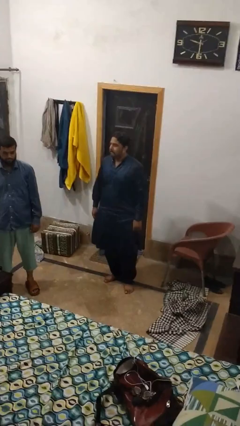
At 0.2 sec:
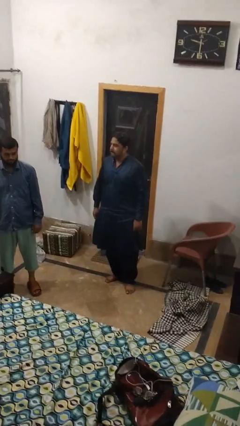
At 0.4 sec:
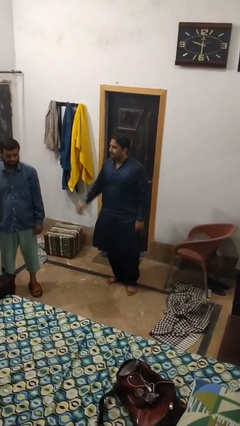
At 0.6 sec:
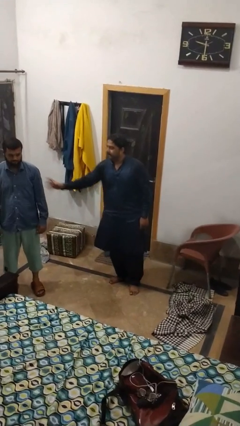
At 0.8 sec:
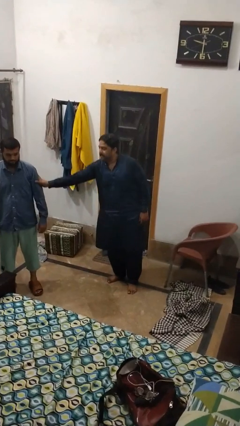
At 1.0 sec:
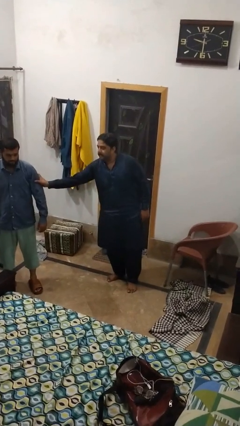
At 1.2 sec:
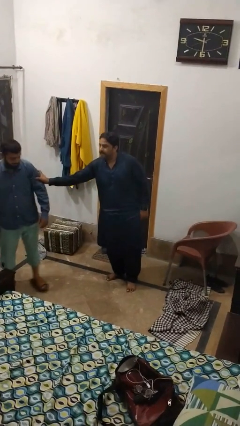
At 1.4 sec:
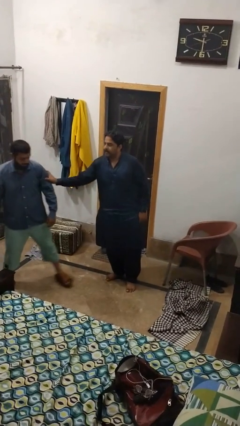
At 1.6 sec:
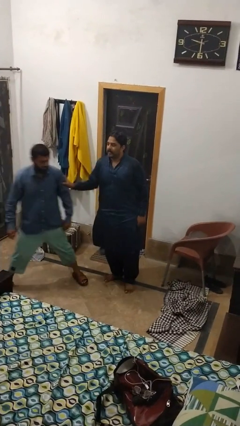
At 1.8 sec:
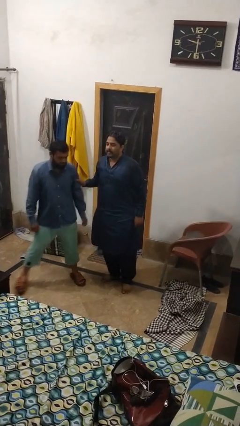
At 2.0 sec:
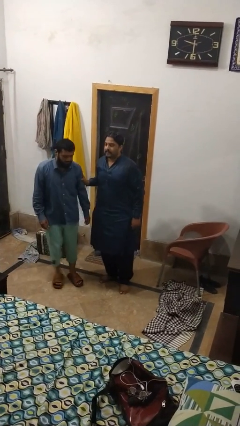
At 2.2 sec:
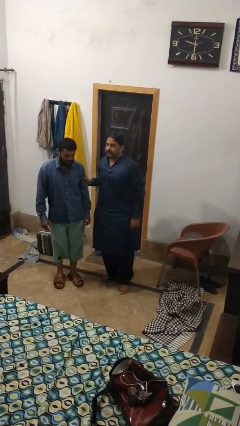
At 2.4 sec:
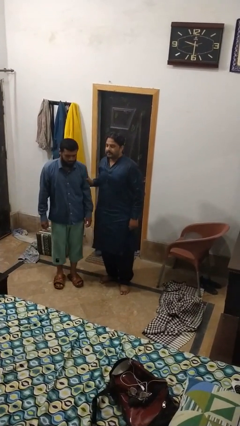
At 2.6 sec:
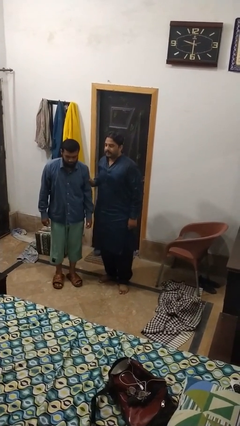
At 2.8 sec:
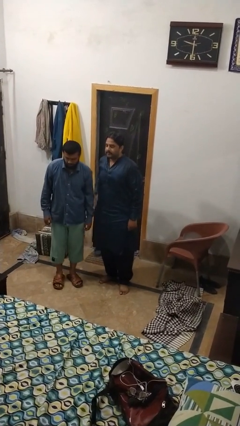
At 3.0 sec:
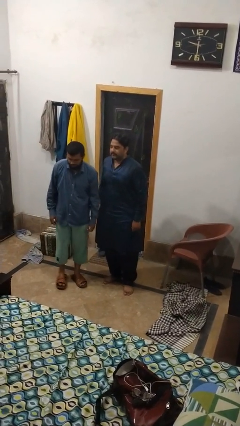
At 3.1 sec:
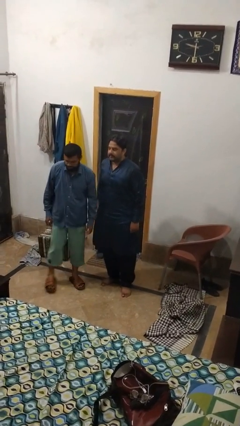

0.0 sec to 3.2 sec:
person grabs person by hair

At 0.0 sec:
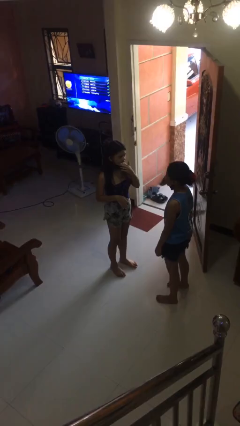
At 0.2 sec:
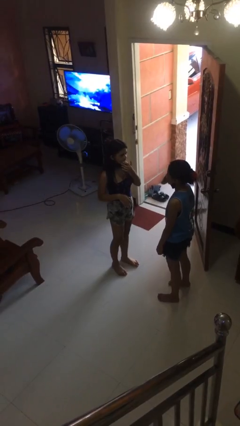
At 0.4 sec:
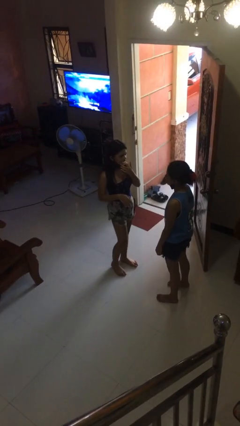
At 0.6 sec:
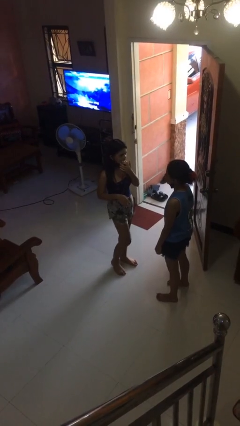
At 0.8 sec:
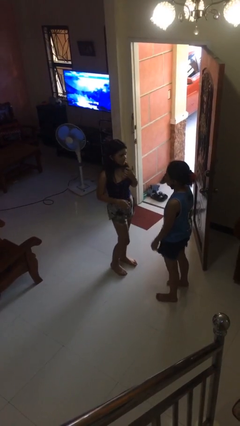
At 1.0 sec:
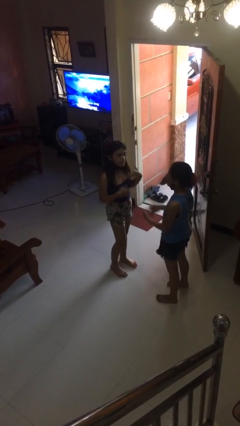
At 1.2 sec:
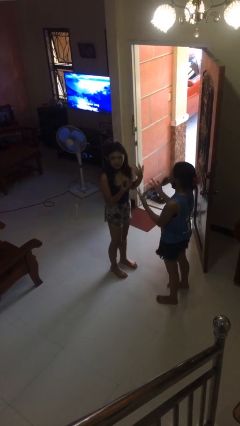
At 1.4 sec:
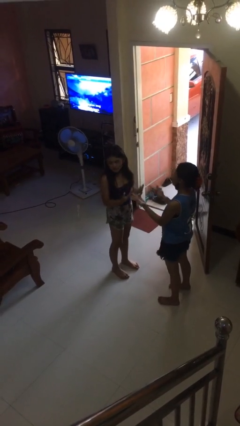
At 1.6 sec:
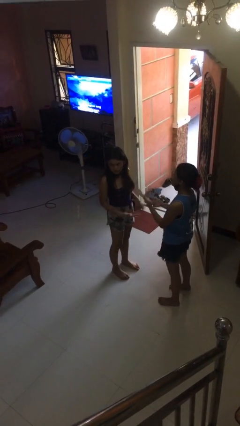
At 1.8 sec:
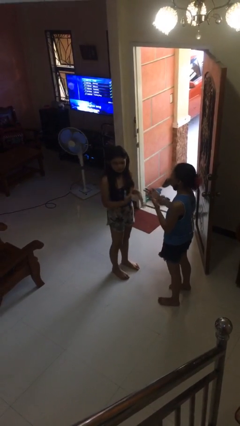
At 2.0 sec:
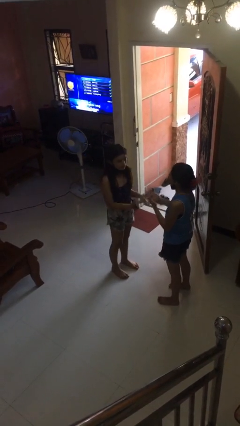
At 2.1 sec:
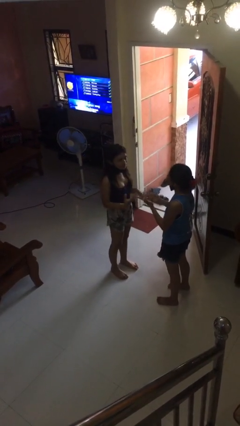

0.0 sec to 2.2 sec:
person talks to person

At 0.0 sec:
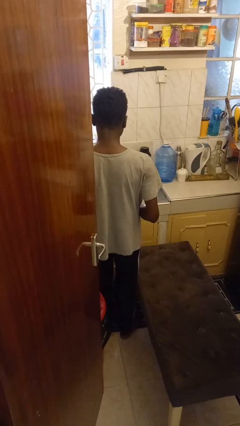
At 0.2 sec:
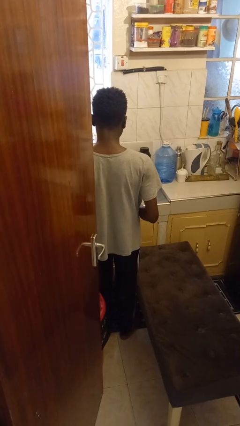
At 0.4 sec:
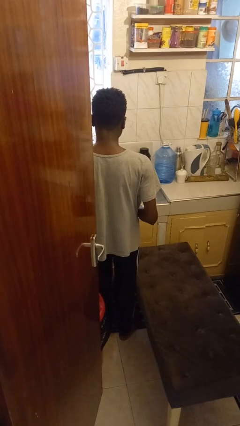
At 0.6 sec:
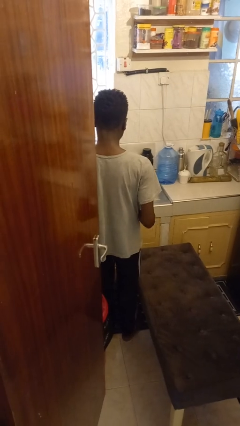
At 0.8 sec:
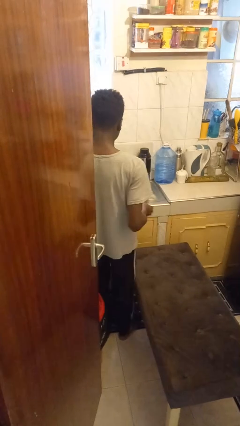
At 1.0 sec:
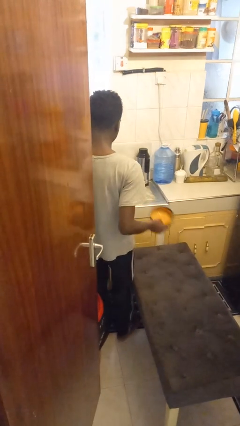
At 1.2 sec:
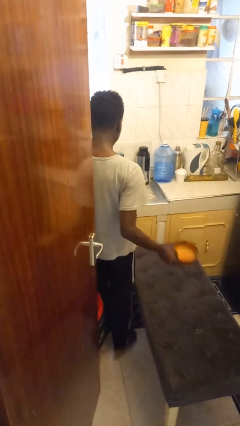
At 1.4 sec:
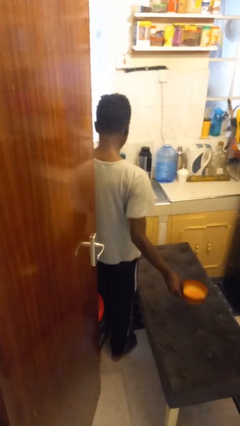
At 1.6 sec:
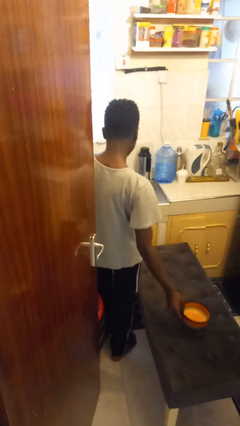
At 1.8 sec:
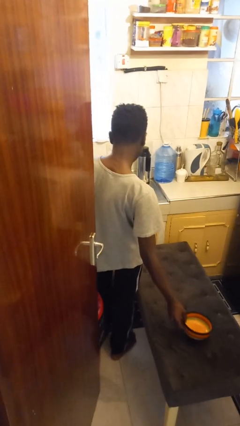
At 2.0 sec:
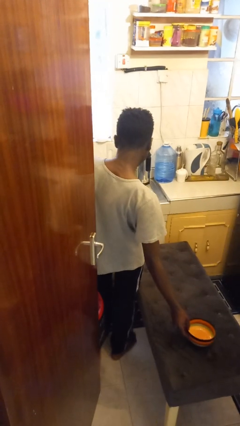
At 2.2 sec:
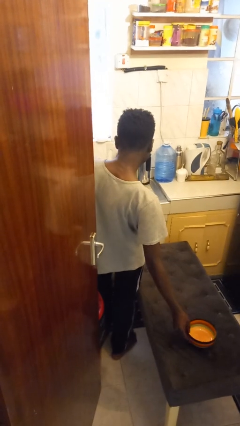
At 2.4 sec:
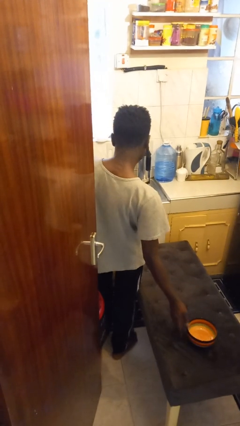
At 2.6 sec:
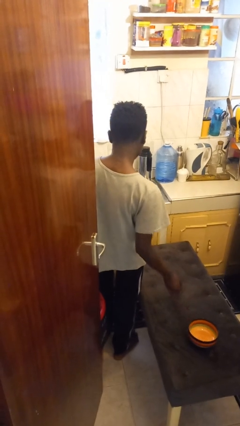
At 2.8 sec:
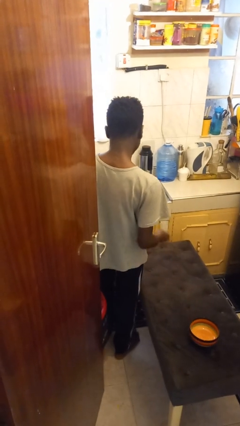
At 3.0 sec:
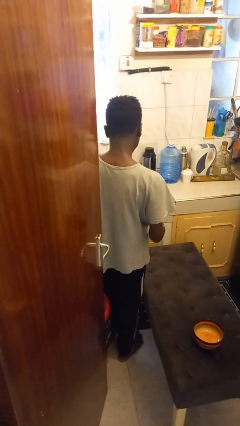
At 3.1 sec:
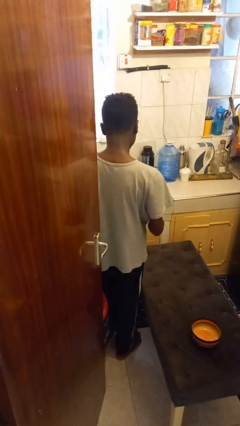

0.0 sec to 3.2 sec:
person sets table

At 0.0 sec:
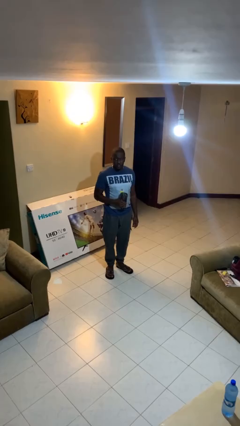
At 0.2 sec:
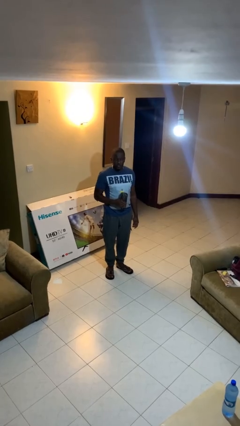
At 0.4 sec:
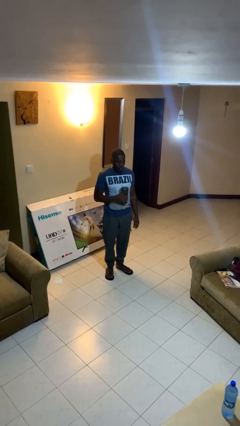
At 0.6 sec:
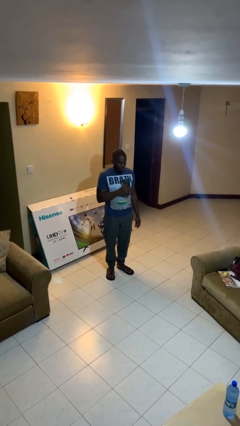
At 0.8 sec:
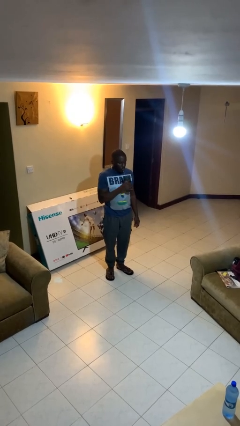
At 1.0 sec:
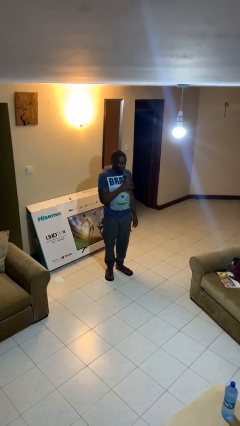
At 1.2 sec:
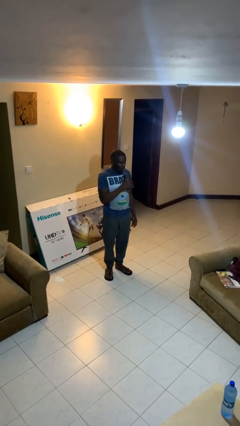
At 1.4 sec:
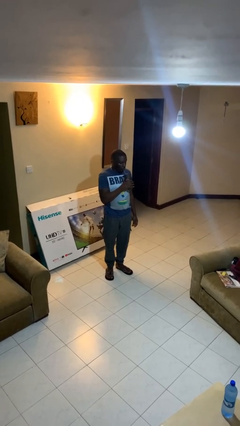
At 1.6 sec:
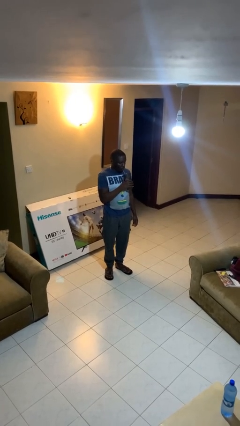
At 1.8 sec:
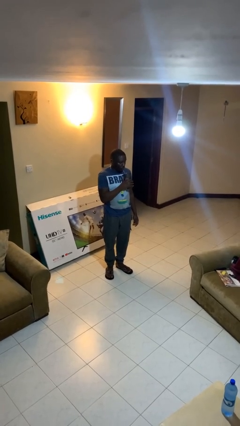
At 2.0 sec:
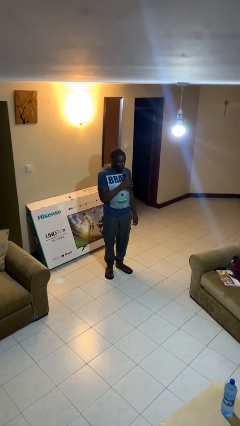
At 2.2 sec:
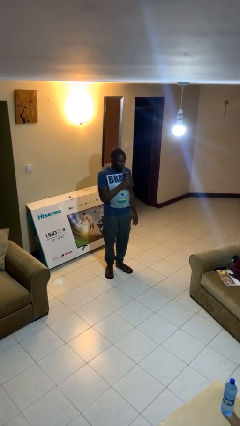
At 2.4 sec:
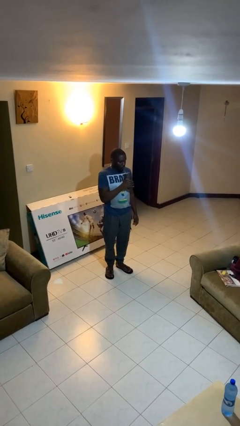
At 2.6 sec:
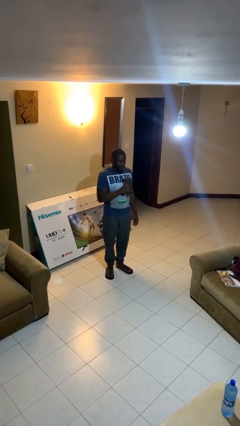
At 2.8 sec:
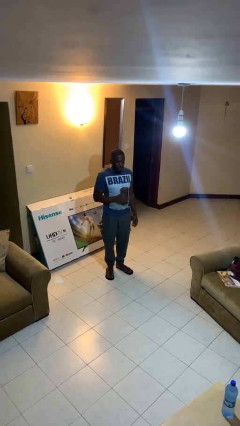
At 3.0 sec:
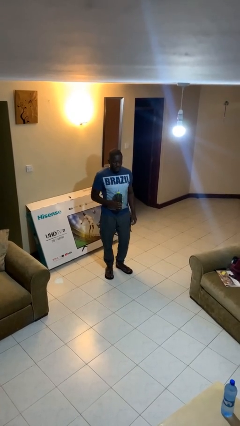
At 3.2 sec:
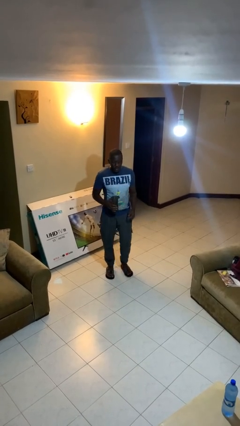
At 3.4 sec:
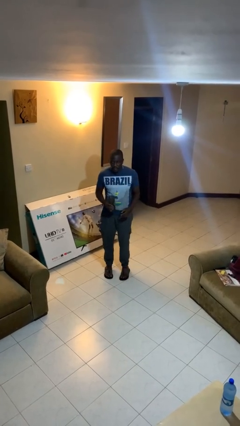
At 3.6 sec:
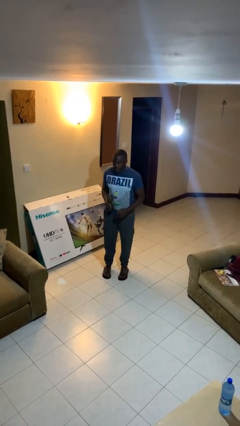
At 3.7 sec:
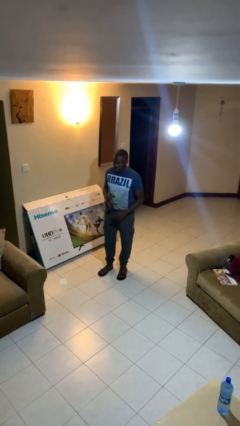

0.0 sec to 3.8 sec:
person drinks from straw

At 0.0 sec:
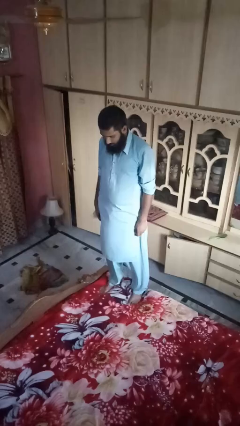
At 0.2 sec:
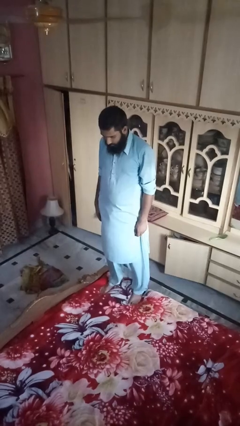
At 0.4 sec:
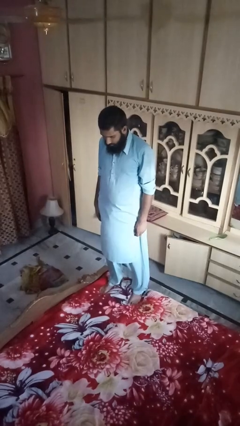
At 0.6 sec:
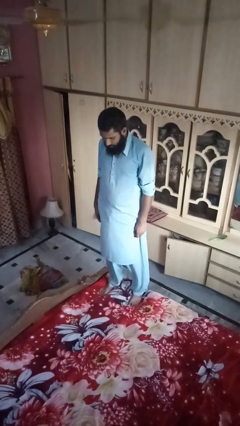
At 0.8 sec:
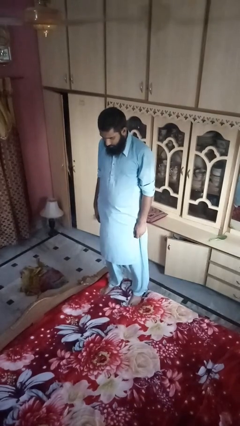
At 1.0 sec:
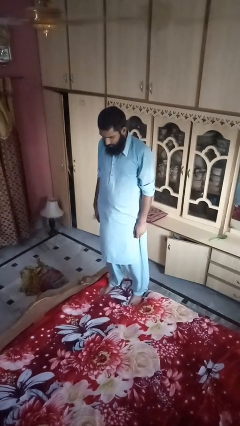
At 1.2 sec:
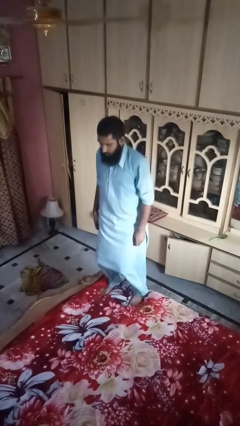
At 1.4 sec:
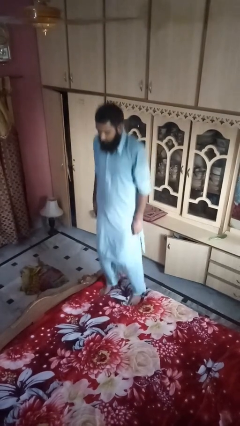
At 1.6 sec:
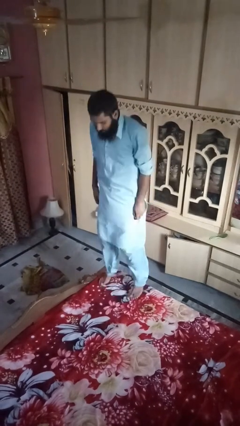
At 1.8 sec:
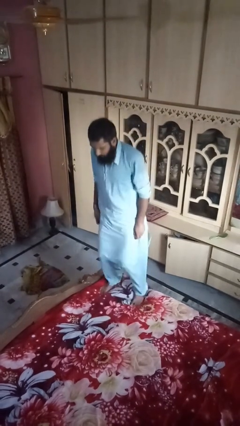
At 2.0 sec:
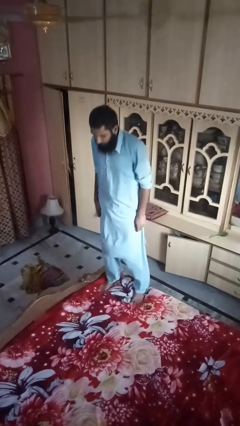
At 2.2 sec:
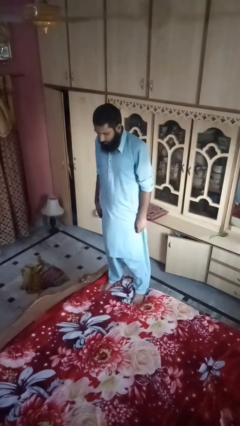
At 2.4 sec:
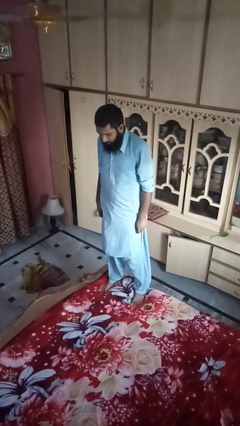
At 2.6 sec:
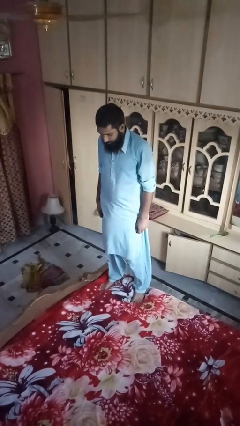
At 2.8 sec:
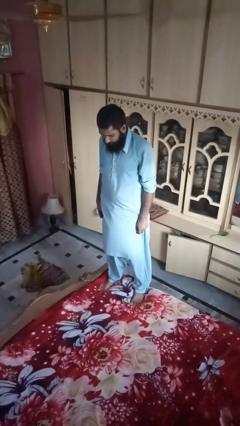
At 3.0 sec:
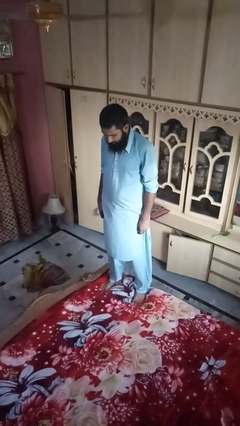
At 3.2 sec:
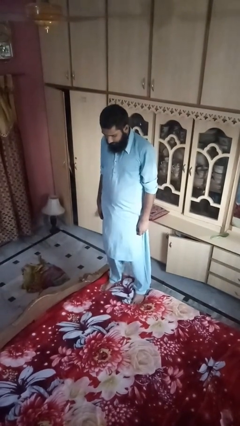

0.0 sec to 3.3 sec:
person jumps on bed

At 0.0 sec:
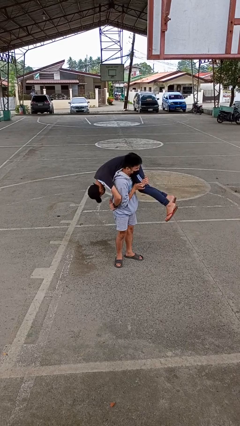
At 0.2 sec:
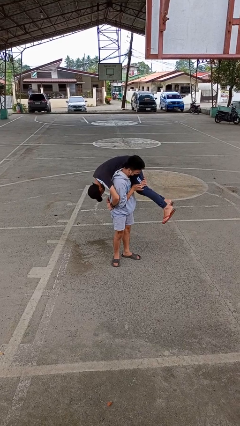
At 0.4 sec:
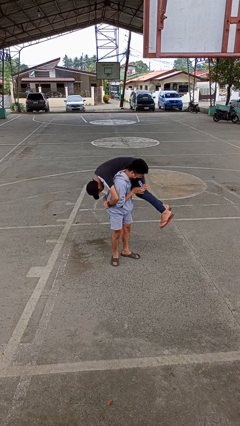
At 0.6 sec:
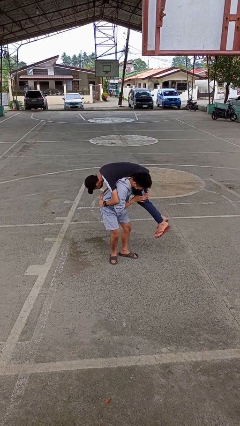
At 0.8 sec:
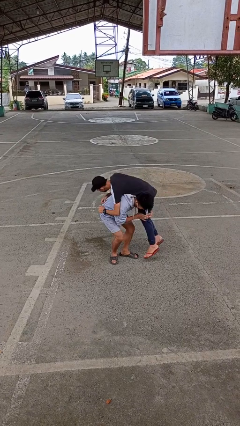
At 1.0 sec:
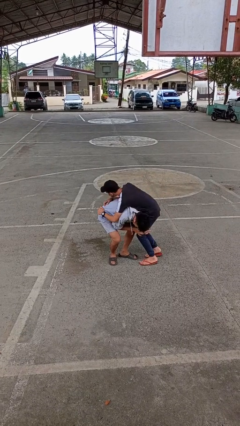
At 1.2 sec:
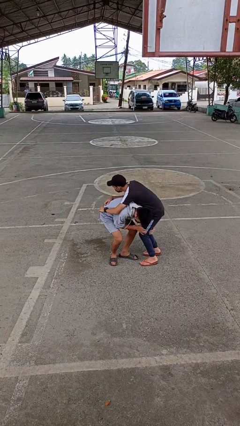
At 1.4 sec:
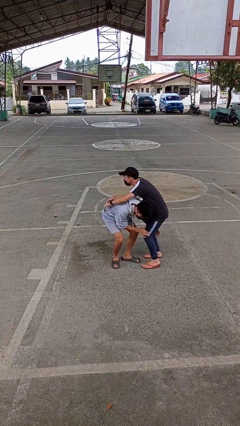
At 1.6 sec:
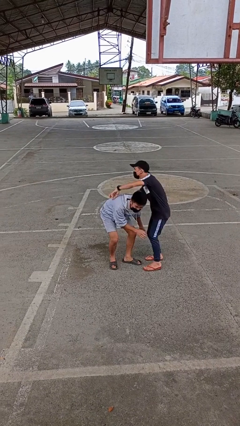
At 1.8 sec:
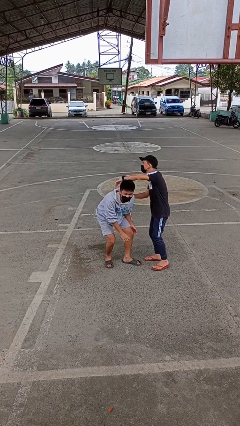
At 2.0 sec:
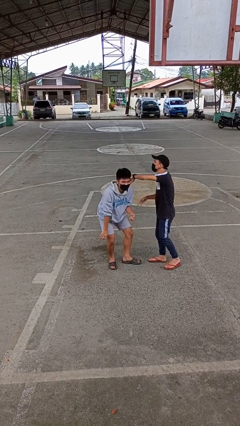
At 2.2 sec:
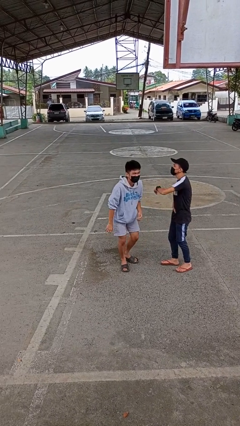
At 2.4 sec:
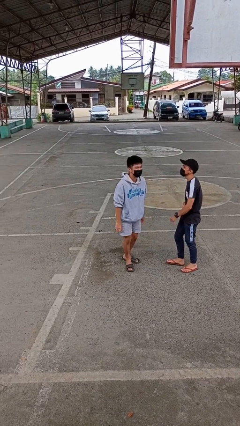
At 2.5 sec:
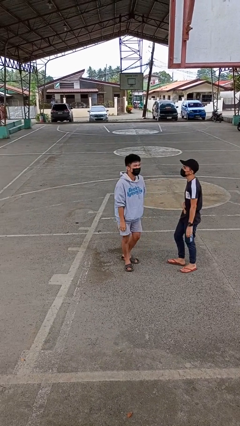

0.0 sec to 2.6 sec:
person puts down person
